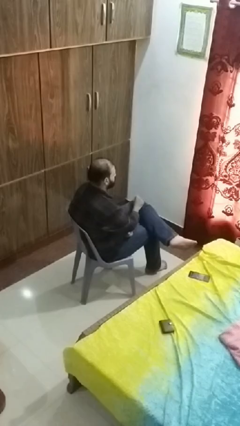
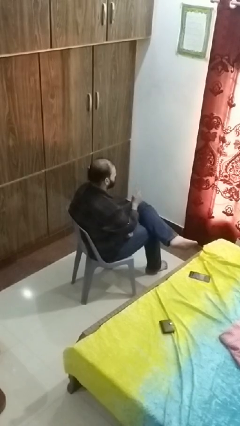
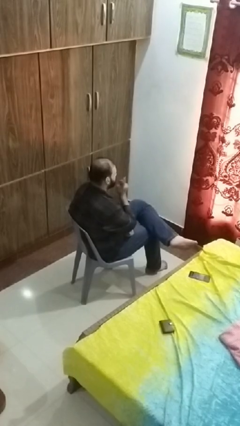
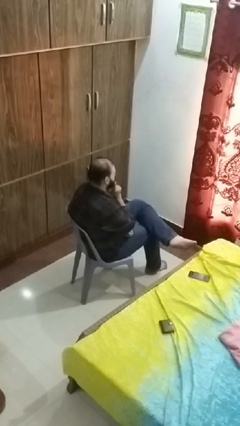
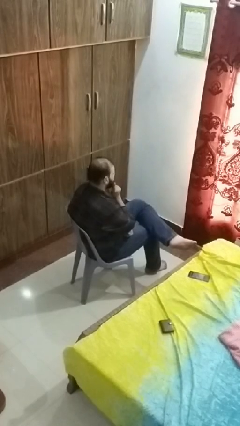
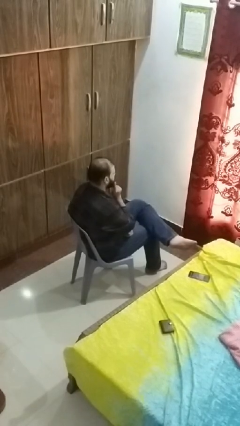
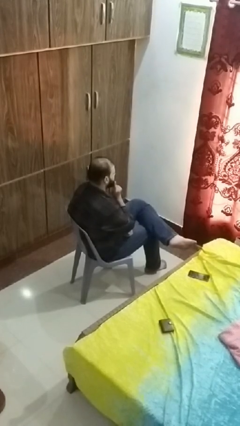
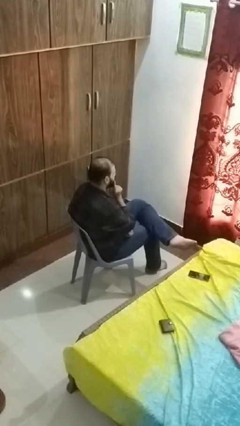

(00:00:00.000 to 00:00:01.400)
person strokes chin

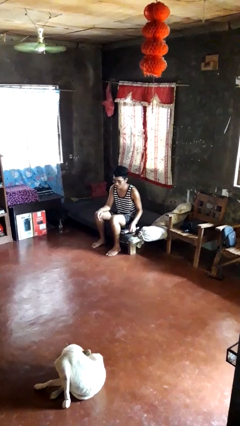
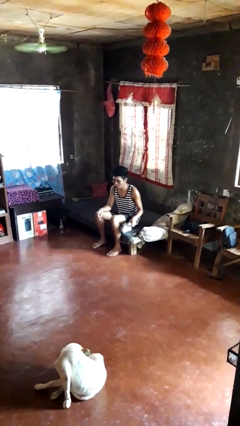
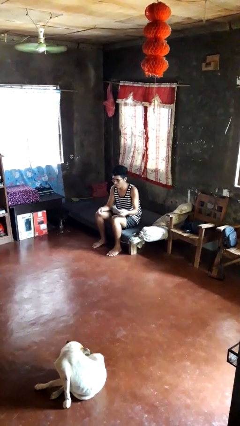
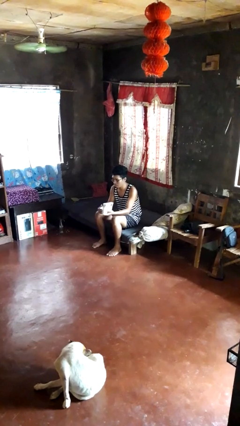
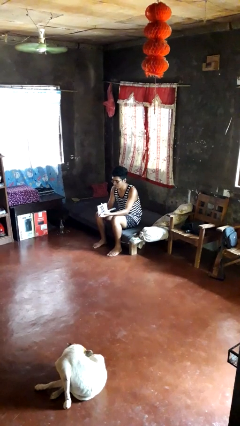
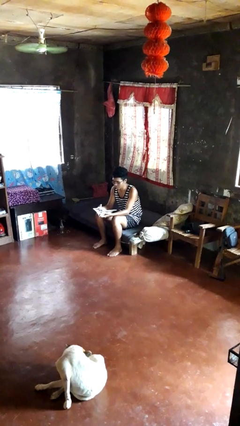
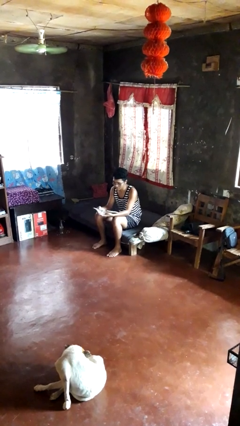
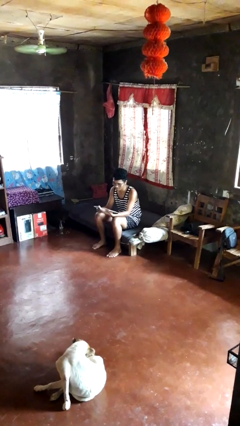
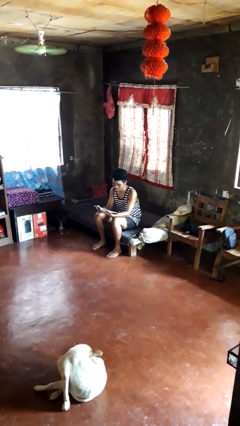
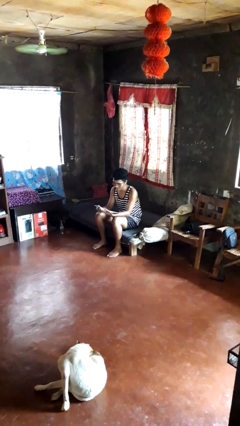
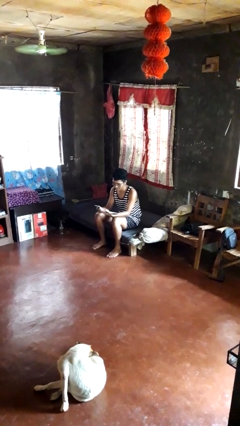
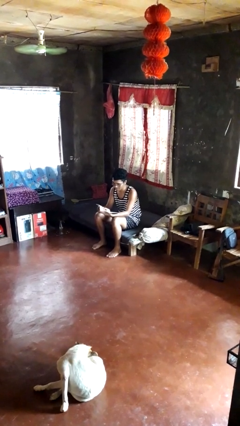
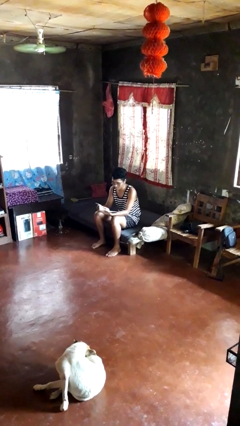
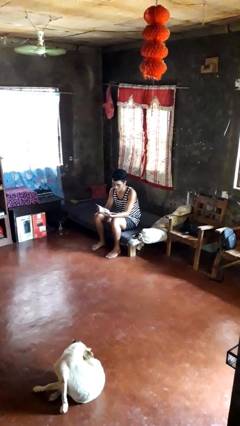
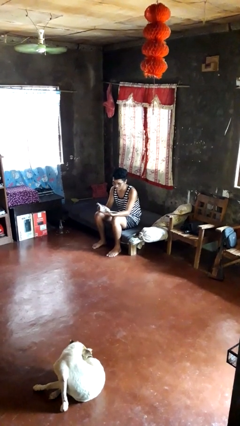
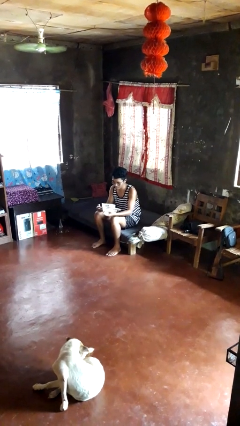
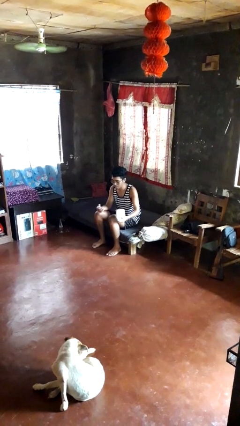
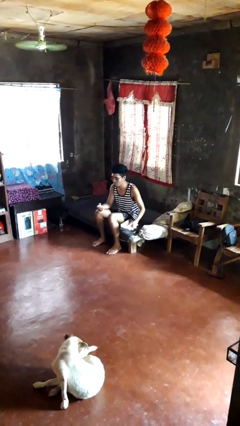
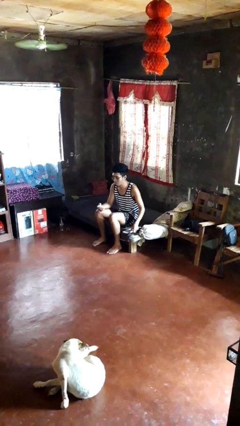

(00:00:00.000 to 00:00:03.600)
person reads magazine

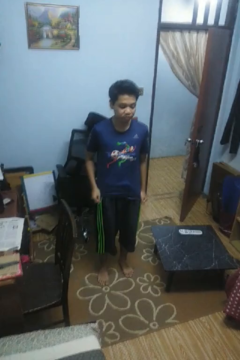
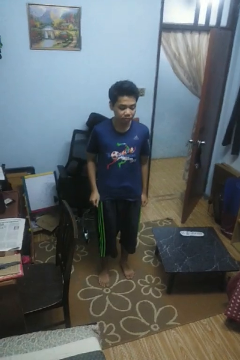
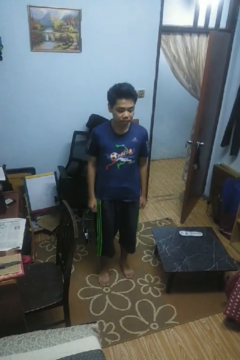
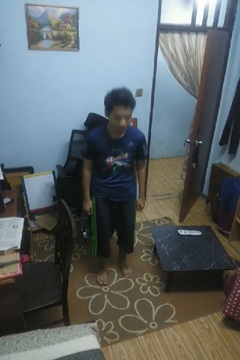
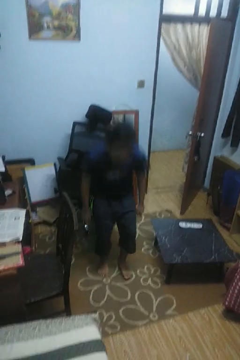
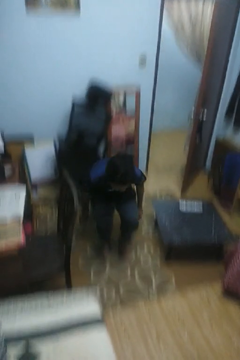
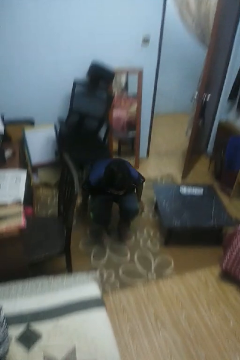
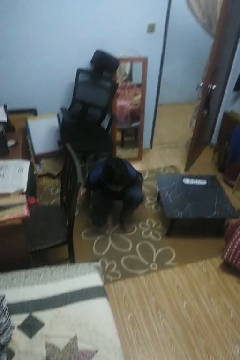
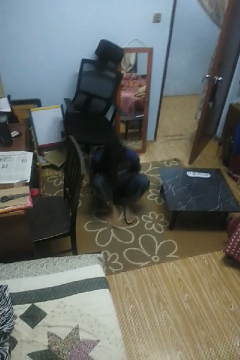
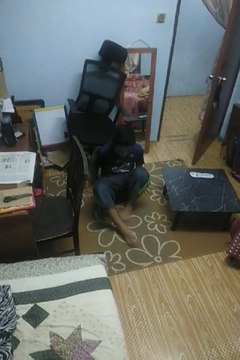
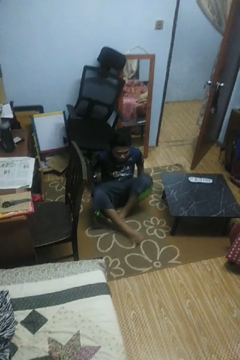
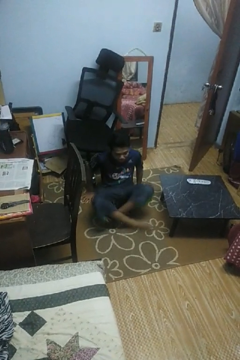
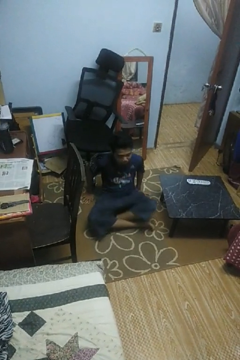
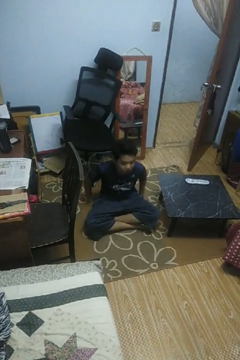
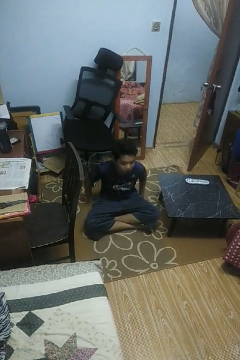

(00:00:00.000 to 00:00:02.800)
person sits crisscross

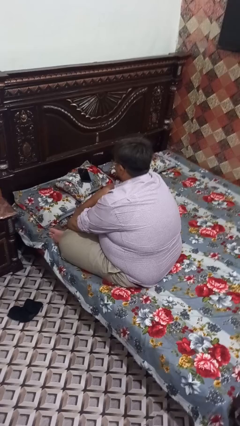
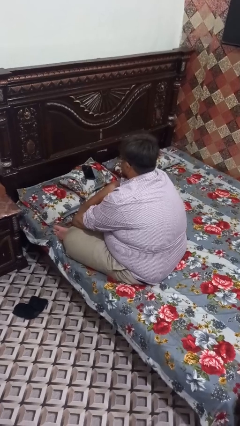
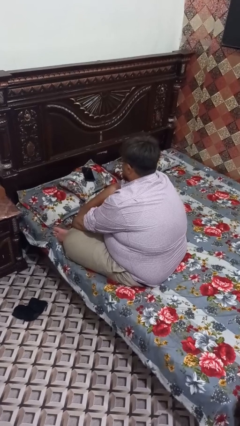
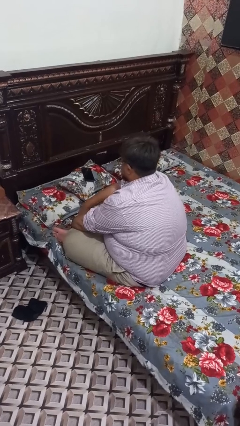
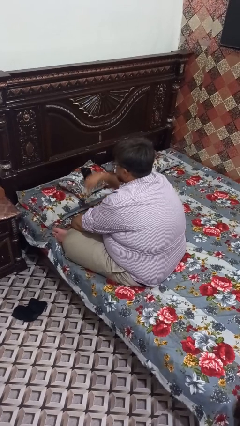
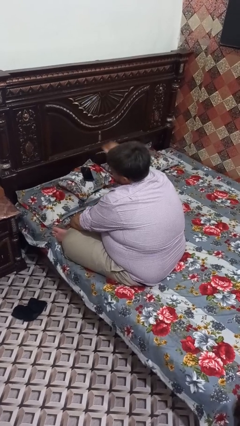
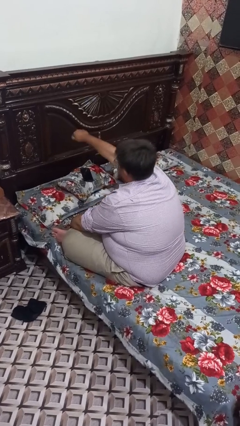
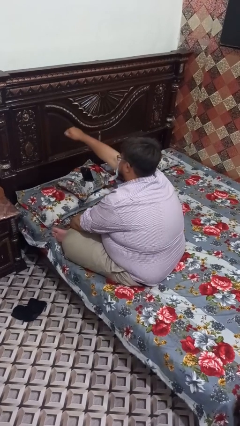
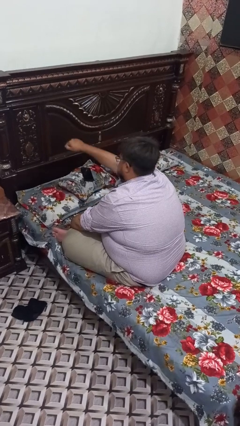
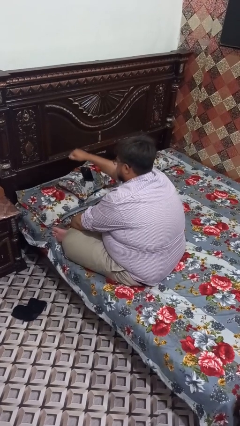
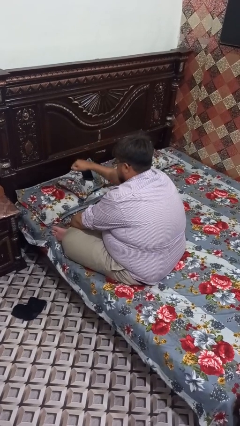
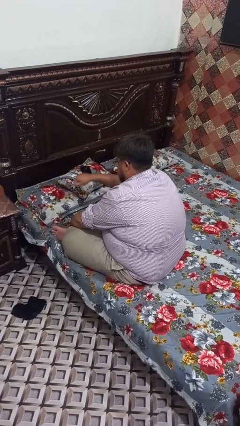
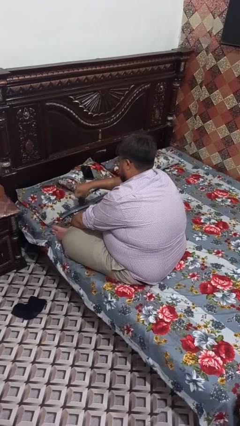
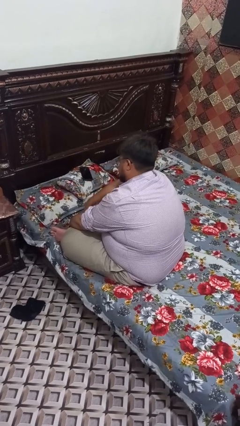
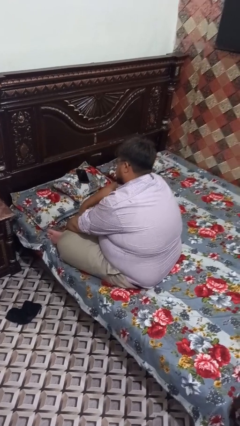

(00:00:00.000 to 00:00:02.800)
person punches

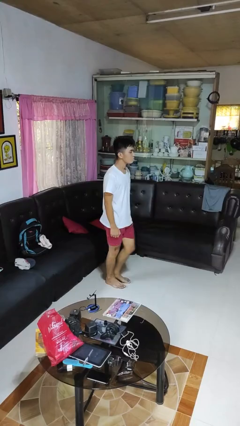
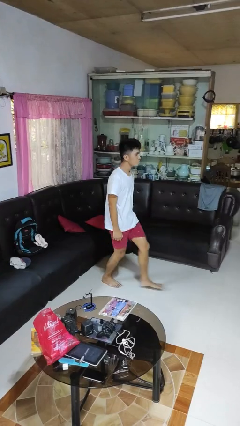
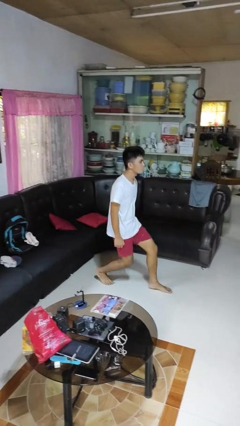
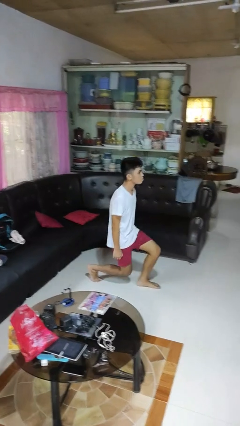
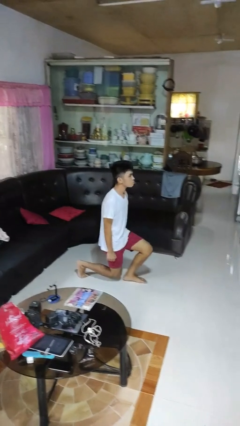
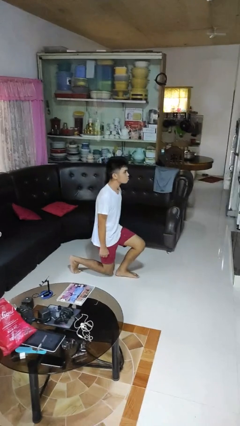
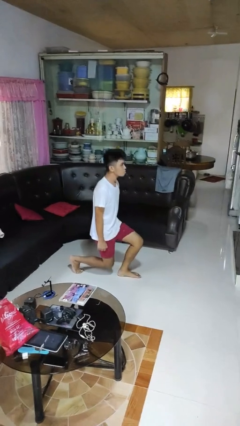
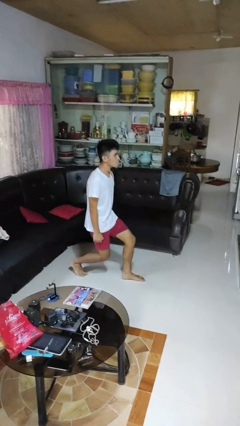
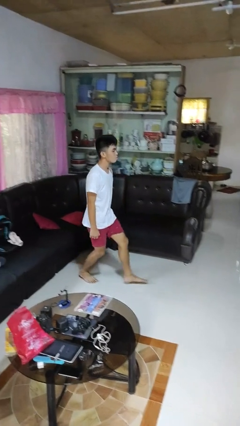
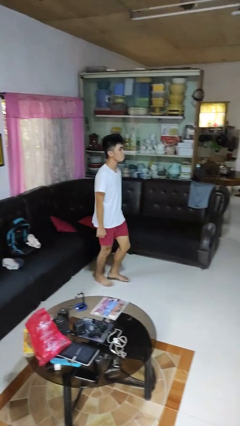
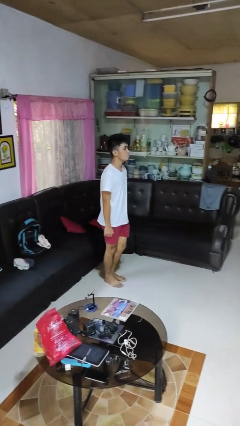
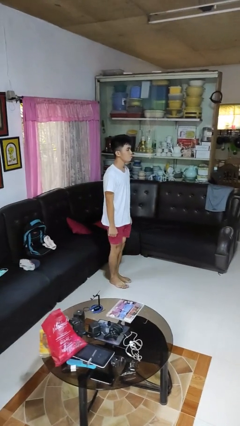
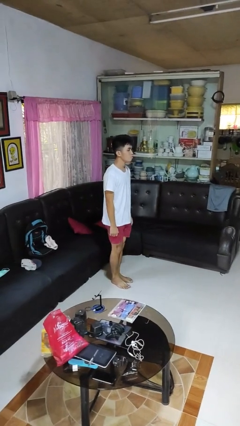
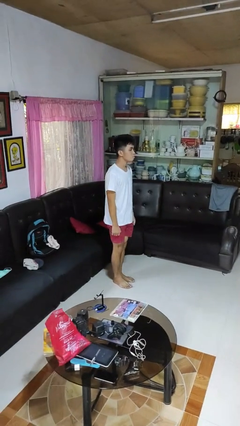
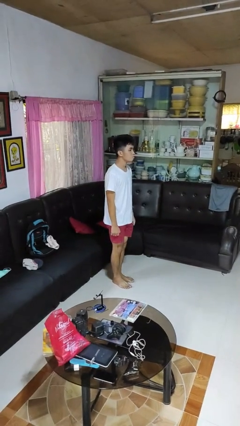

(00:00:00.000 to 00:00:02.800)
person exercises with lunges

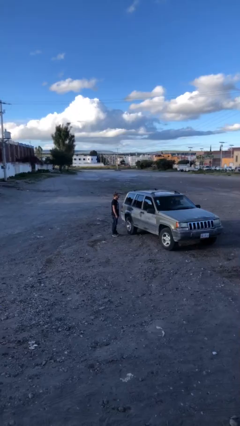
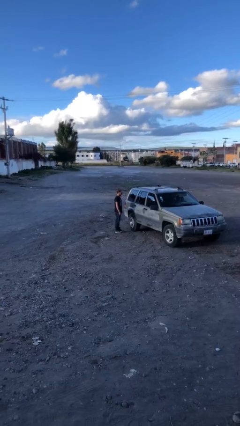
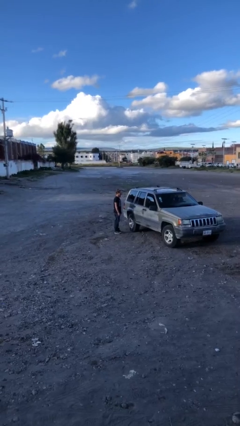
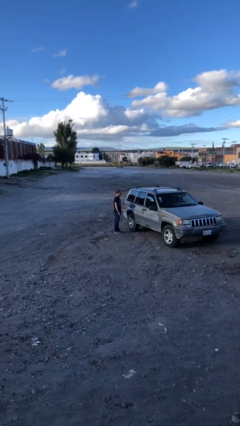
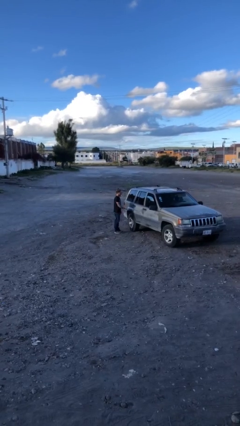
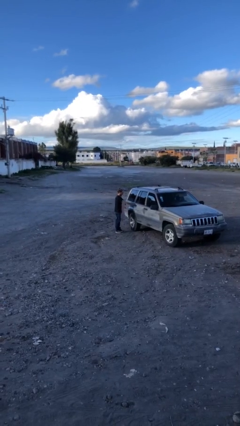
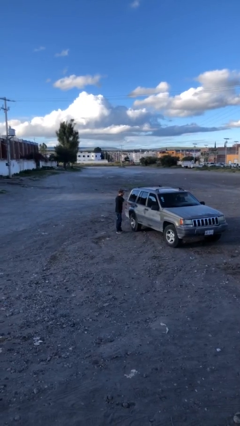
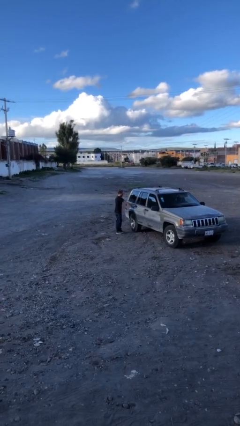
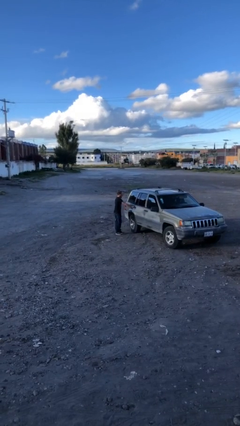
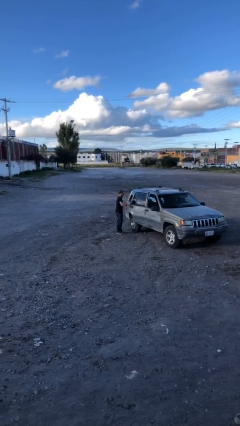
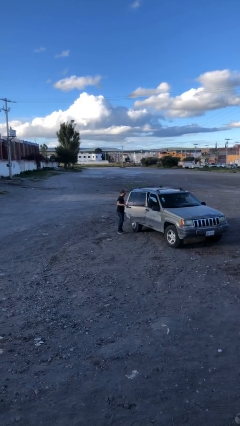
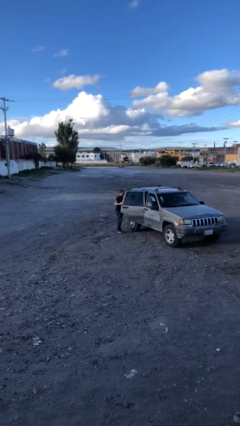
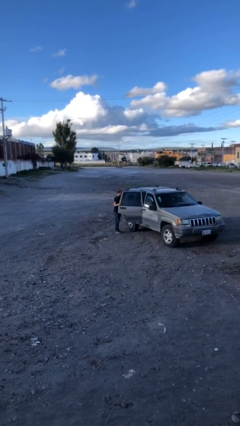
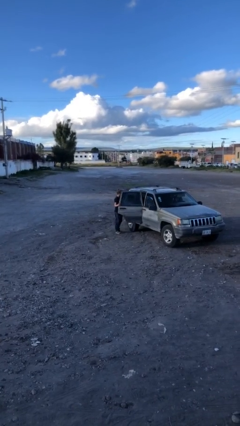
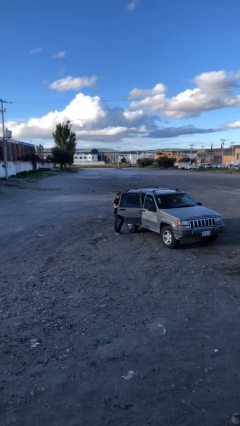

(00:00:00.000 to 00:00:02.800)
person opens car door

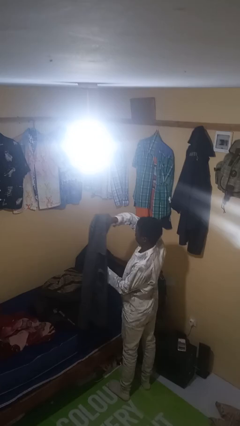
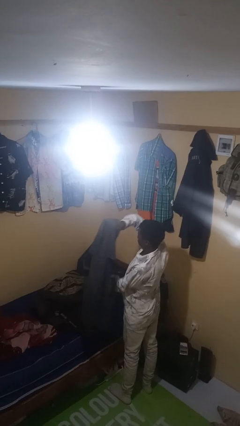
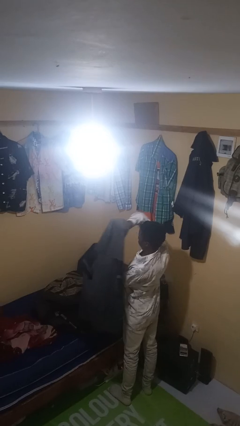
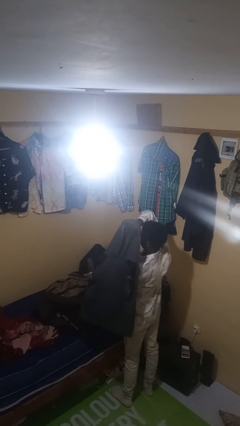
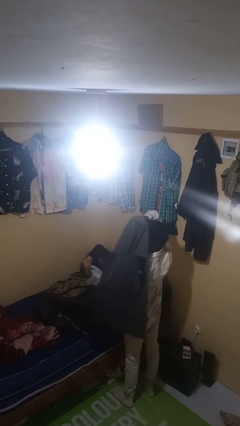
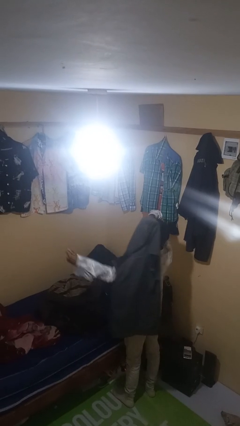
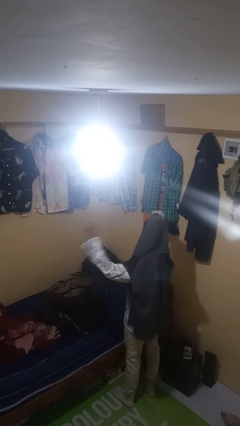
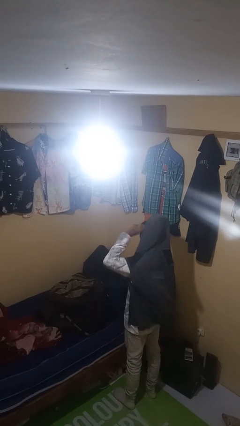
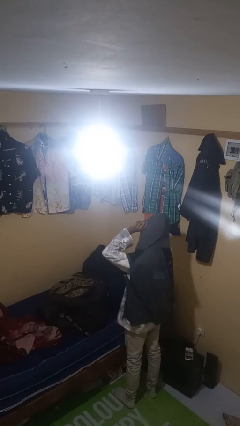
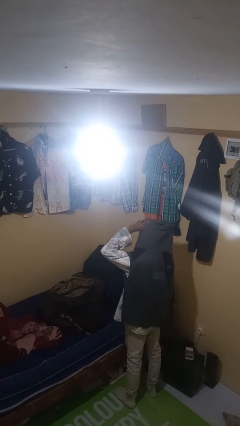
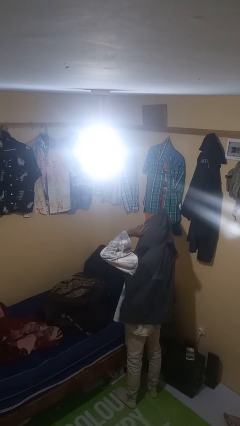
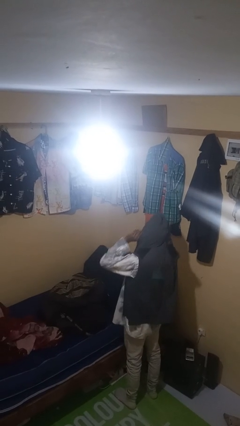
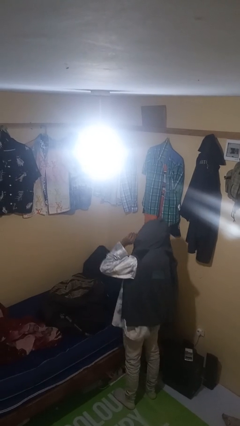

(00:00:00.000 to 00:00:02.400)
person puts on hoodie
